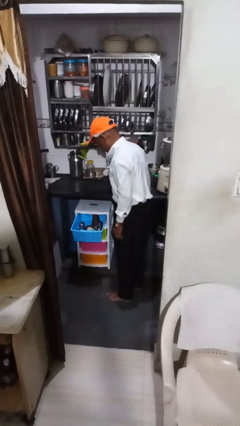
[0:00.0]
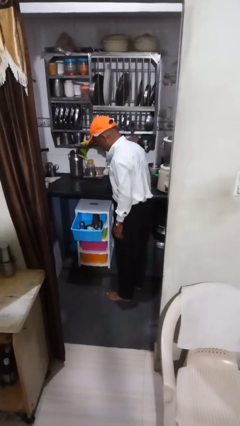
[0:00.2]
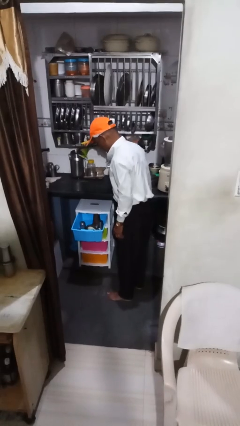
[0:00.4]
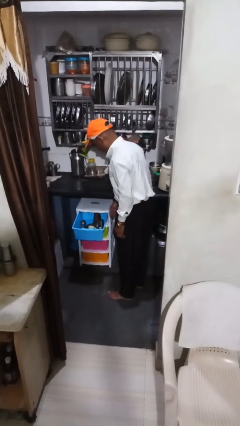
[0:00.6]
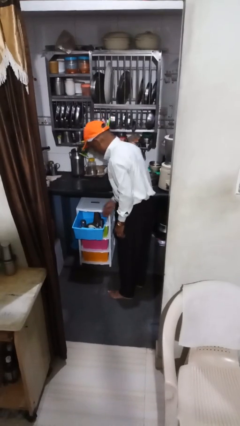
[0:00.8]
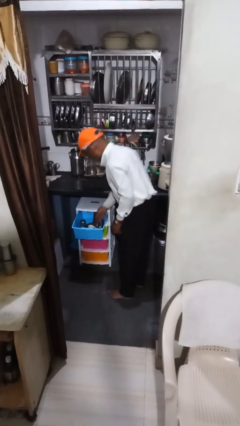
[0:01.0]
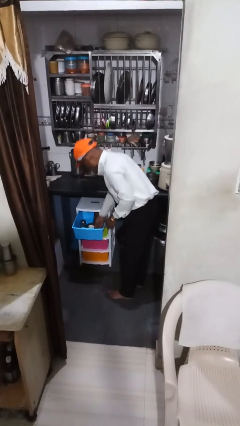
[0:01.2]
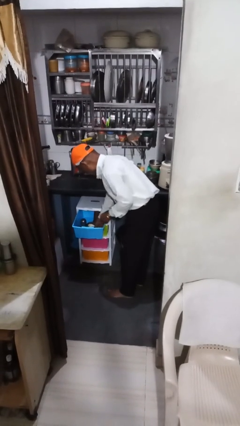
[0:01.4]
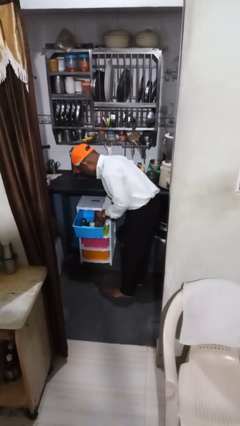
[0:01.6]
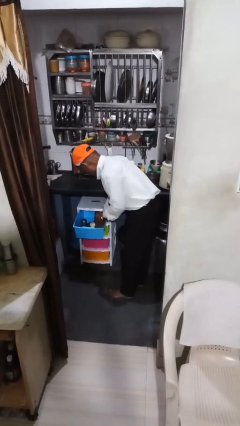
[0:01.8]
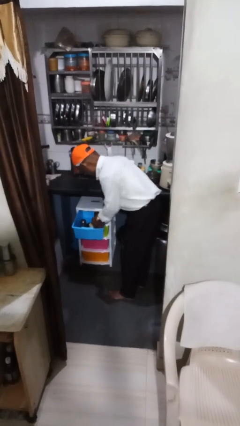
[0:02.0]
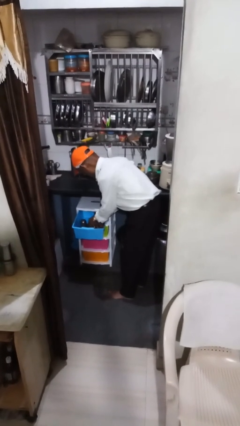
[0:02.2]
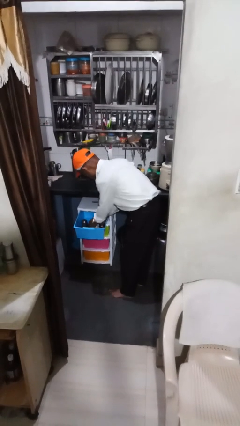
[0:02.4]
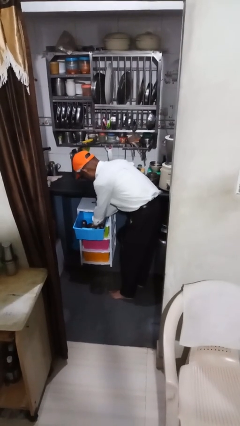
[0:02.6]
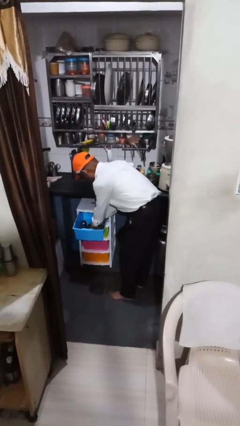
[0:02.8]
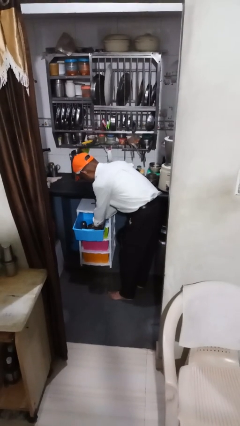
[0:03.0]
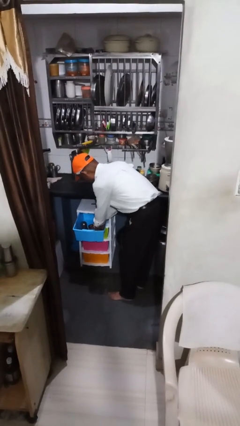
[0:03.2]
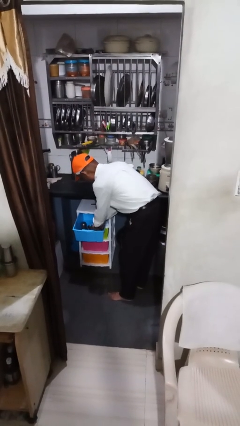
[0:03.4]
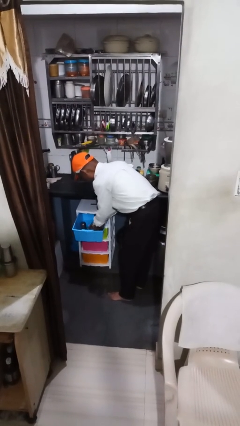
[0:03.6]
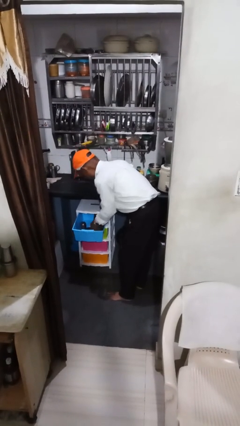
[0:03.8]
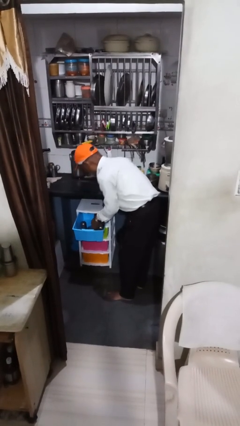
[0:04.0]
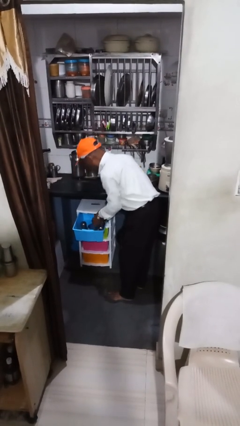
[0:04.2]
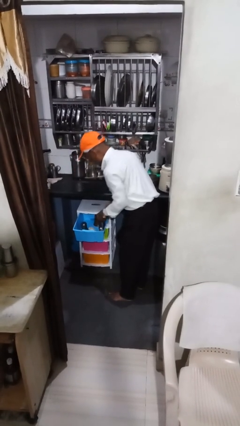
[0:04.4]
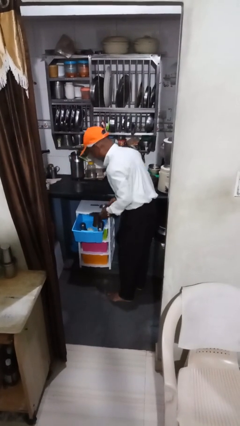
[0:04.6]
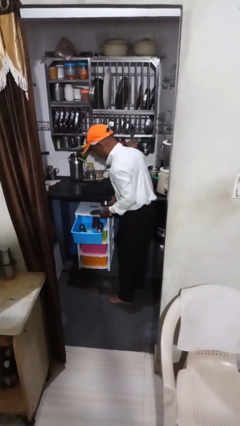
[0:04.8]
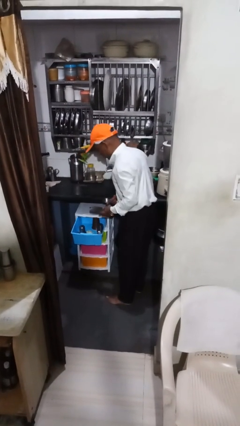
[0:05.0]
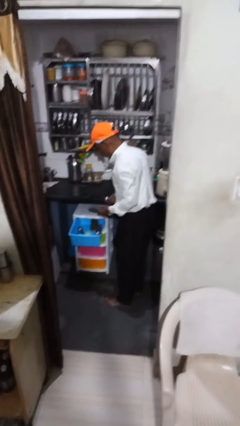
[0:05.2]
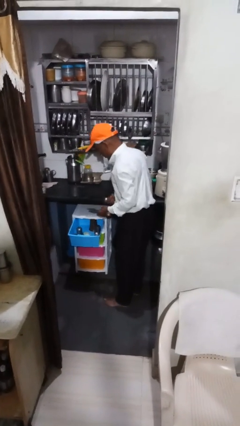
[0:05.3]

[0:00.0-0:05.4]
person takes object from kitchen drawer

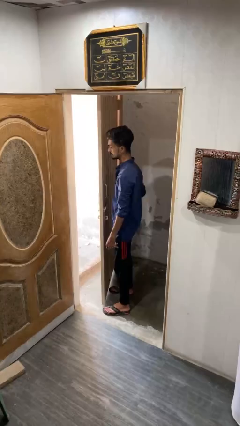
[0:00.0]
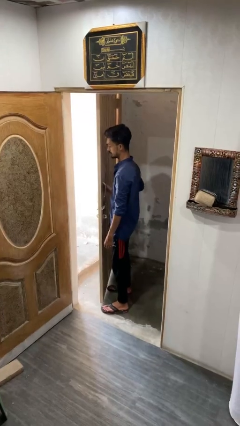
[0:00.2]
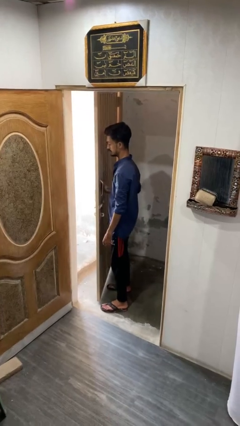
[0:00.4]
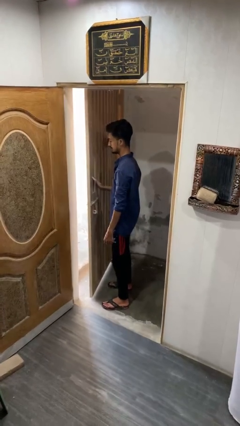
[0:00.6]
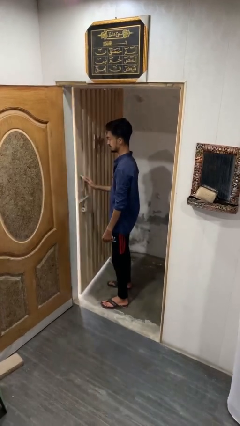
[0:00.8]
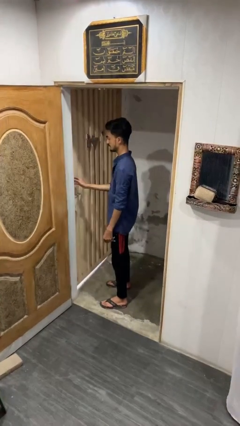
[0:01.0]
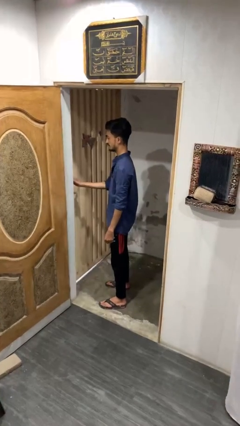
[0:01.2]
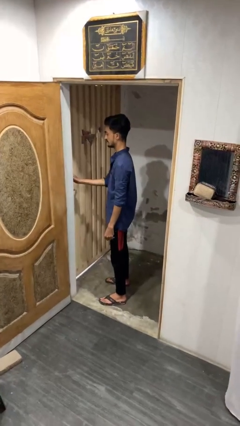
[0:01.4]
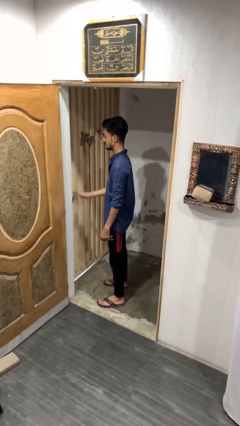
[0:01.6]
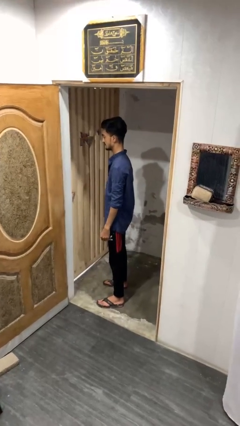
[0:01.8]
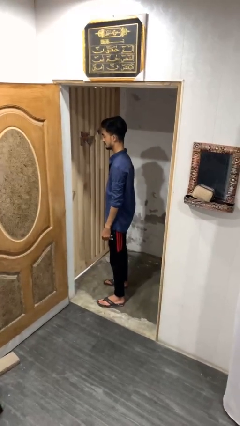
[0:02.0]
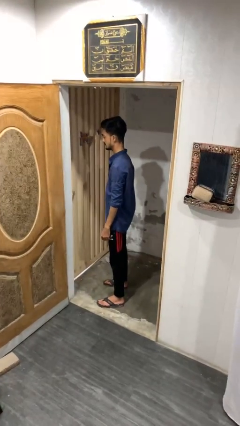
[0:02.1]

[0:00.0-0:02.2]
person closes gate

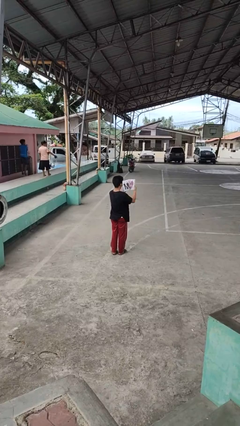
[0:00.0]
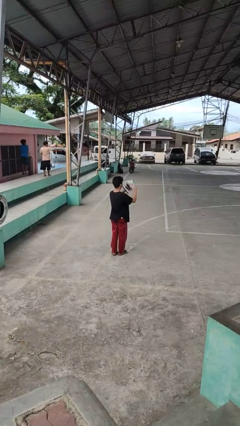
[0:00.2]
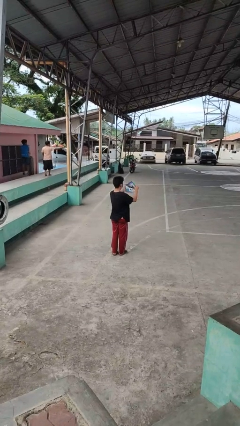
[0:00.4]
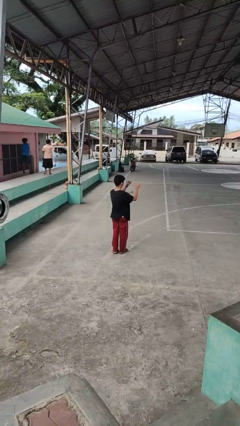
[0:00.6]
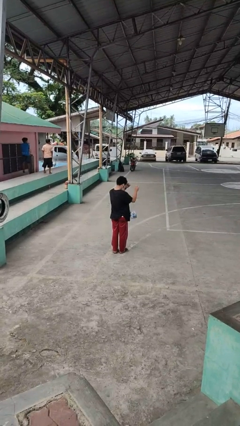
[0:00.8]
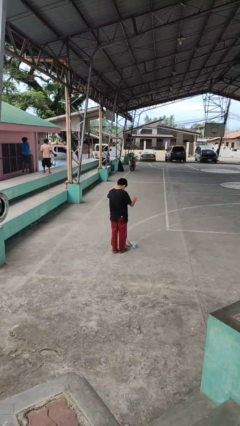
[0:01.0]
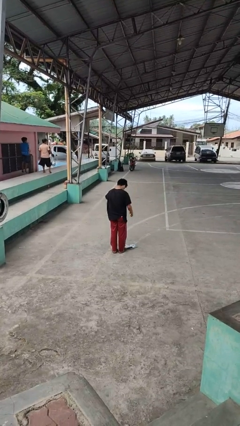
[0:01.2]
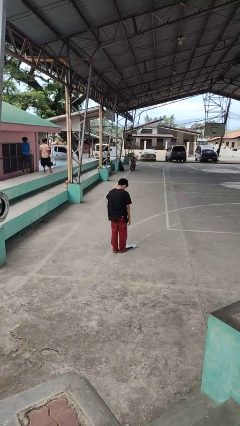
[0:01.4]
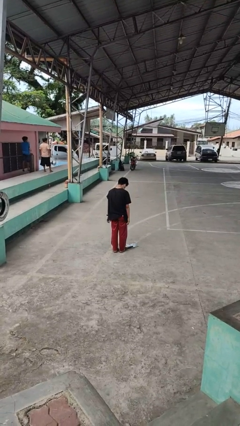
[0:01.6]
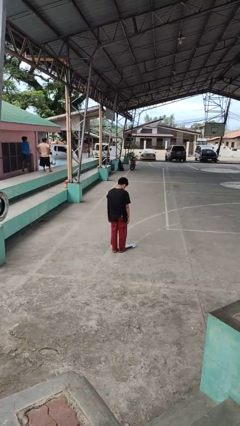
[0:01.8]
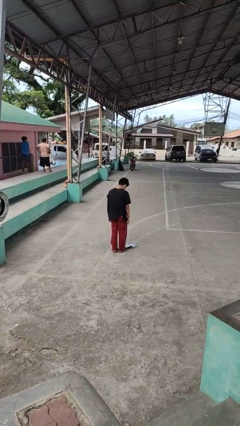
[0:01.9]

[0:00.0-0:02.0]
person drops object

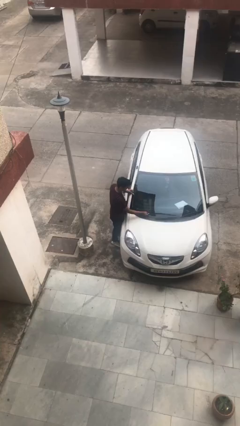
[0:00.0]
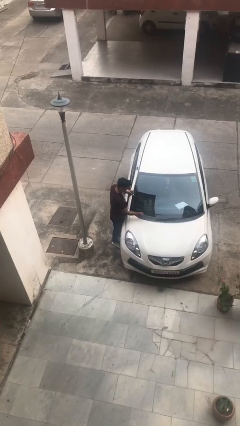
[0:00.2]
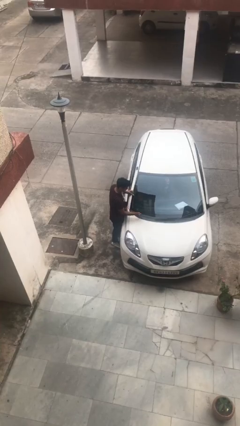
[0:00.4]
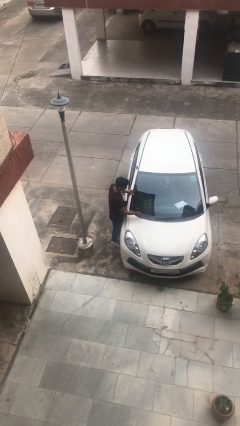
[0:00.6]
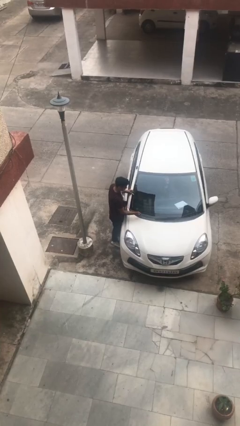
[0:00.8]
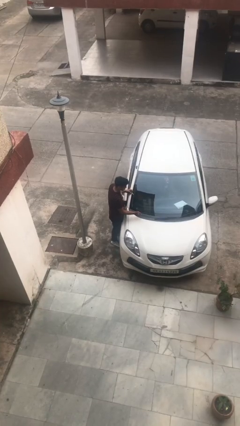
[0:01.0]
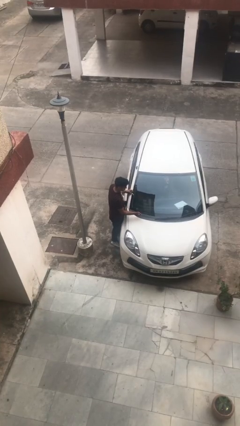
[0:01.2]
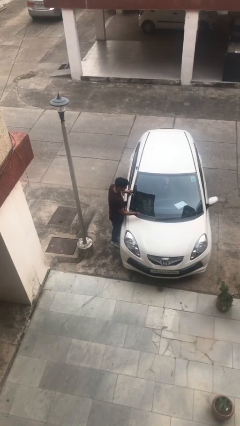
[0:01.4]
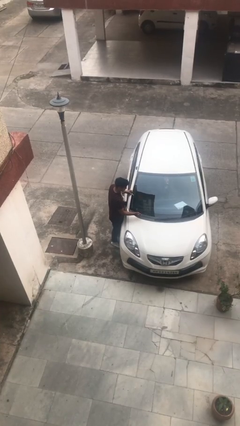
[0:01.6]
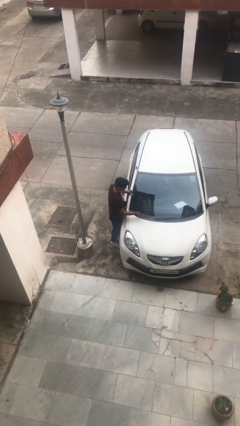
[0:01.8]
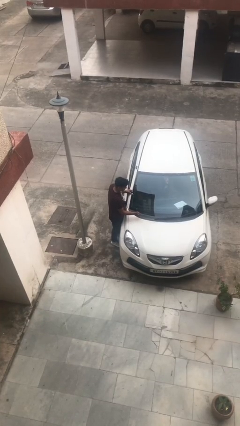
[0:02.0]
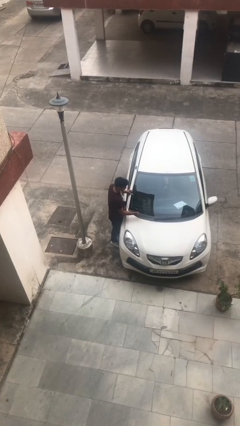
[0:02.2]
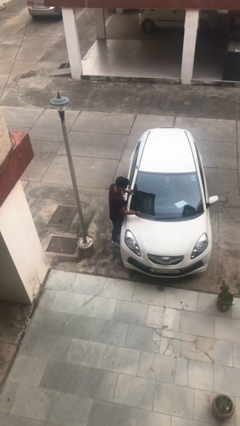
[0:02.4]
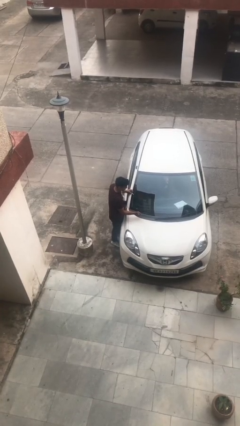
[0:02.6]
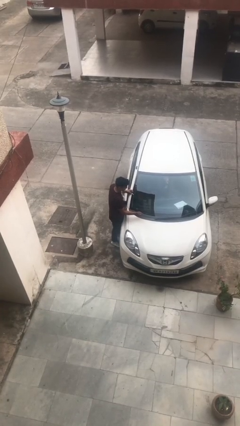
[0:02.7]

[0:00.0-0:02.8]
person flips up car wipers

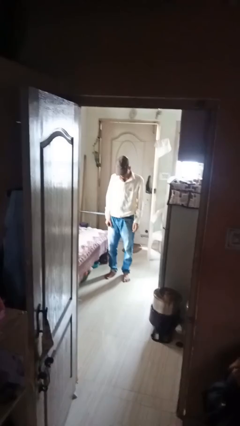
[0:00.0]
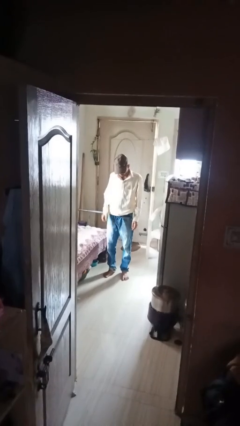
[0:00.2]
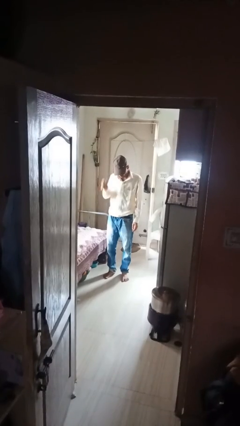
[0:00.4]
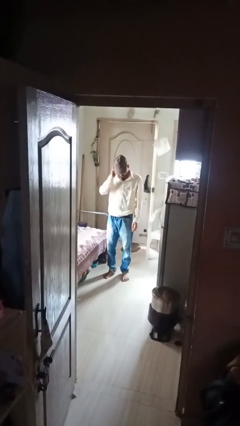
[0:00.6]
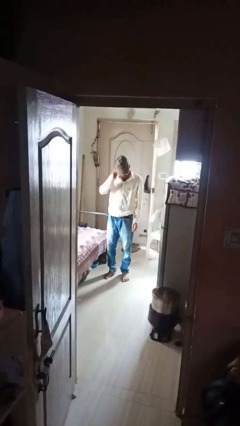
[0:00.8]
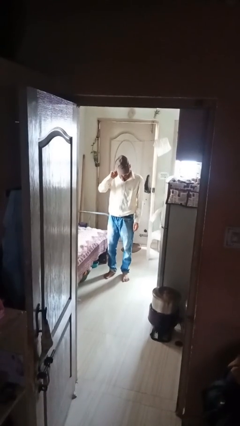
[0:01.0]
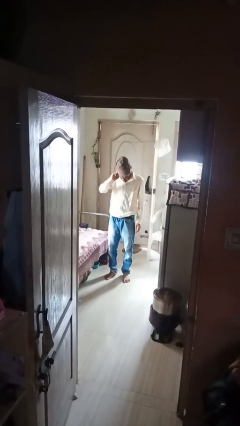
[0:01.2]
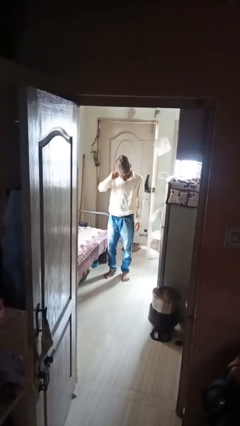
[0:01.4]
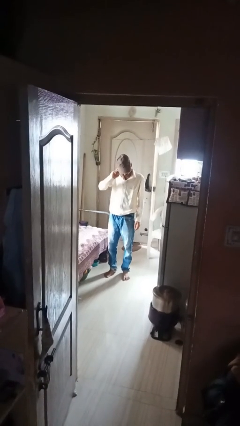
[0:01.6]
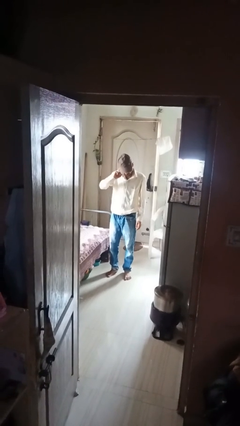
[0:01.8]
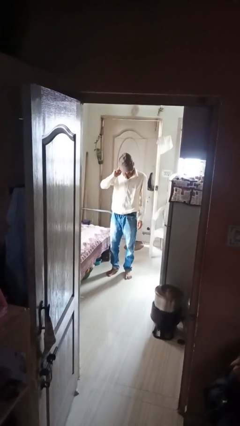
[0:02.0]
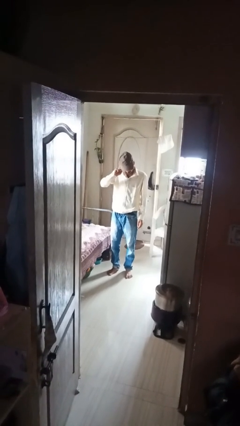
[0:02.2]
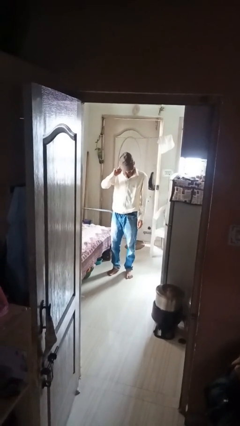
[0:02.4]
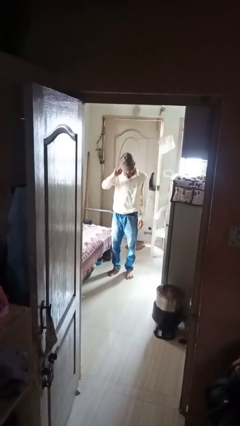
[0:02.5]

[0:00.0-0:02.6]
person touches earlobe

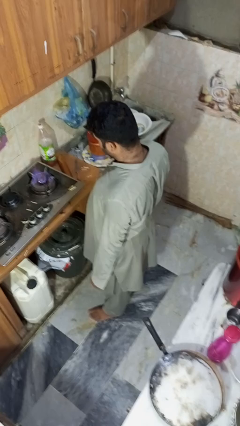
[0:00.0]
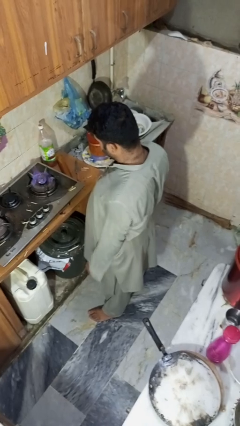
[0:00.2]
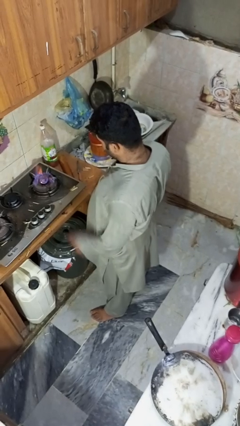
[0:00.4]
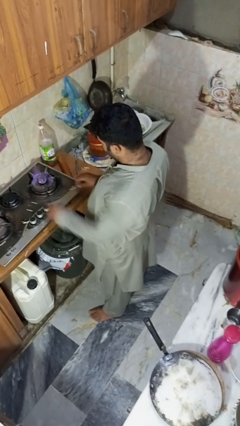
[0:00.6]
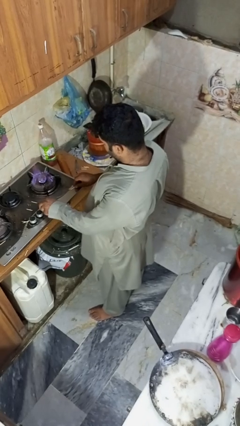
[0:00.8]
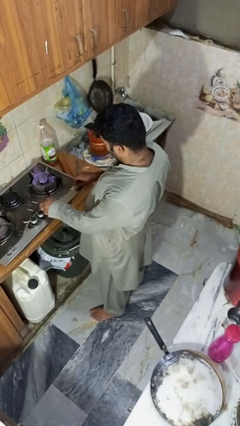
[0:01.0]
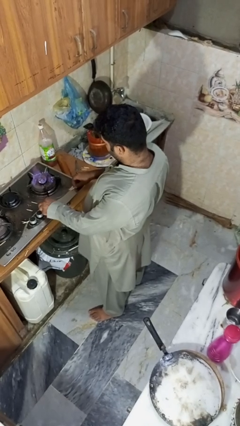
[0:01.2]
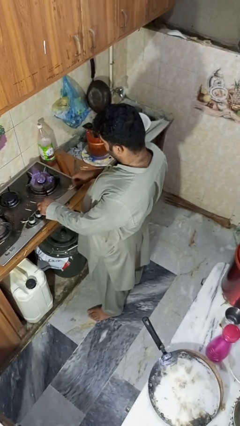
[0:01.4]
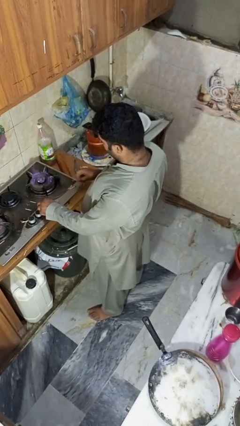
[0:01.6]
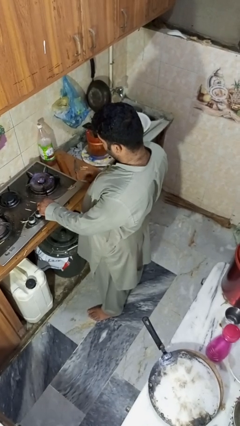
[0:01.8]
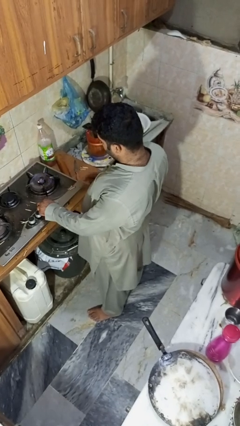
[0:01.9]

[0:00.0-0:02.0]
person turns off stovetop

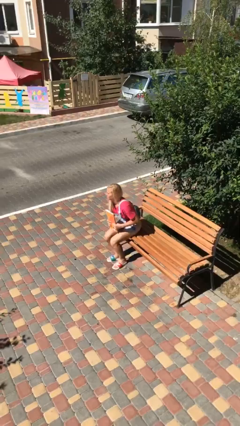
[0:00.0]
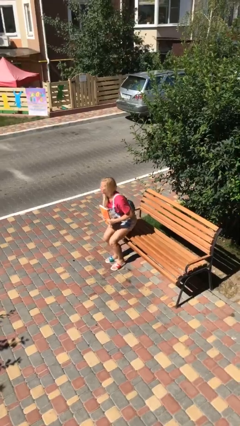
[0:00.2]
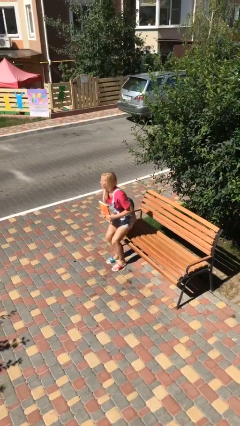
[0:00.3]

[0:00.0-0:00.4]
person stands up
